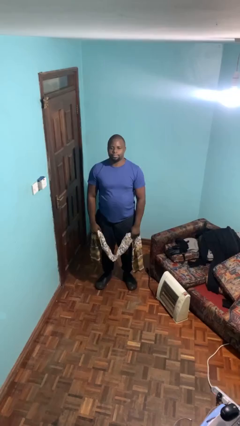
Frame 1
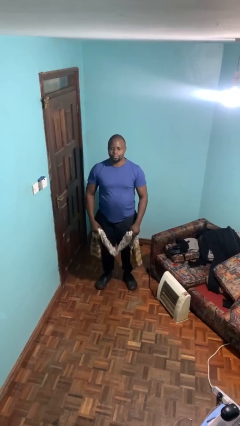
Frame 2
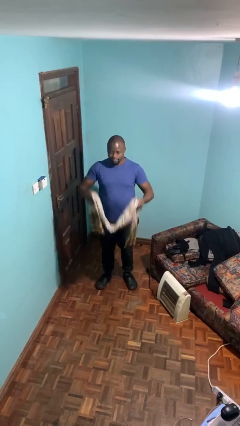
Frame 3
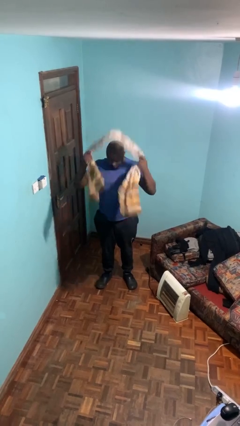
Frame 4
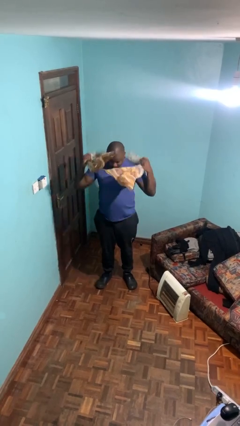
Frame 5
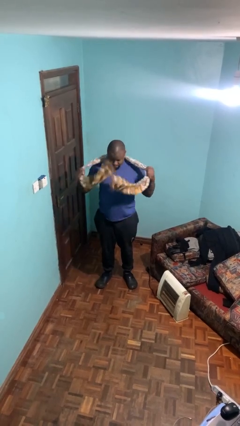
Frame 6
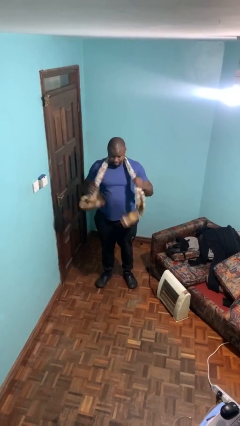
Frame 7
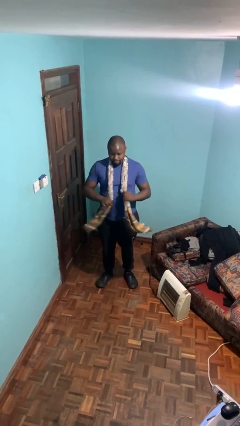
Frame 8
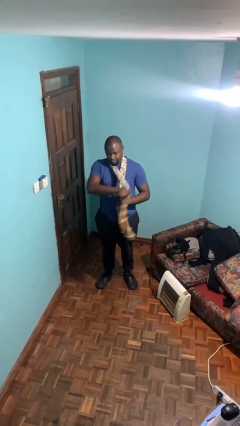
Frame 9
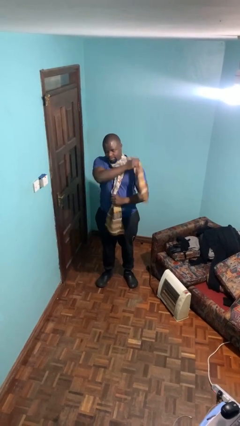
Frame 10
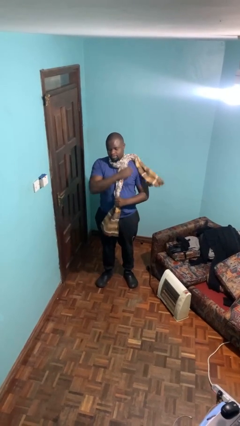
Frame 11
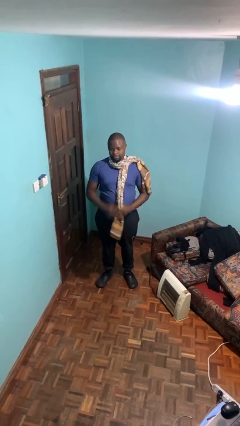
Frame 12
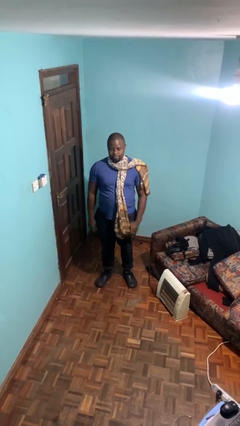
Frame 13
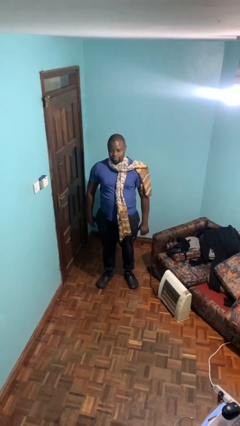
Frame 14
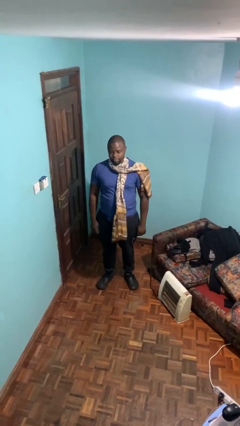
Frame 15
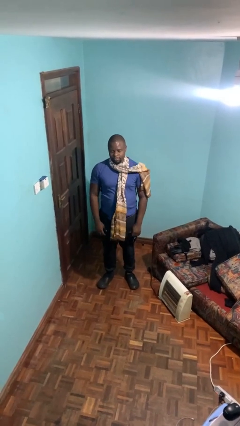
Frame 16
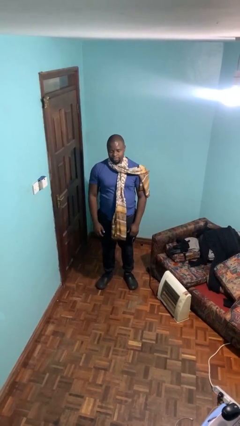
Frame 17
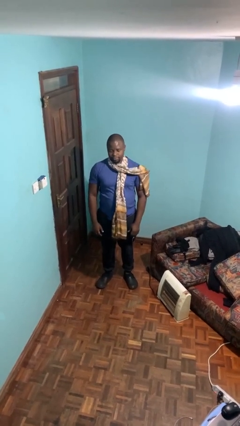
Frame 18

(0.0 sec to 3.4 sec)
person puts on scarf

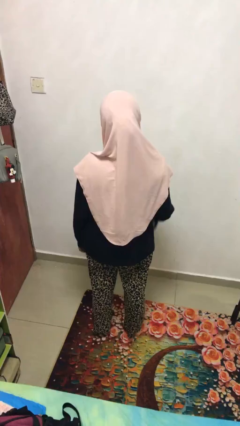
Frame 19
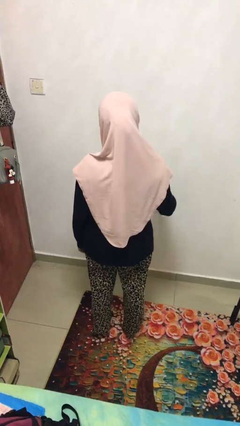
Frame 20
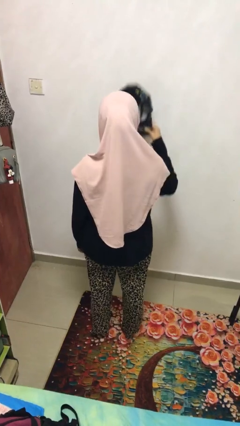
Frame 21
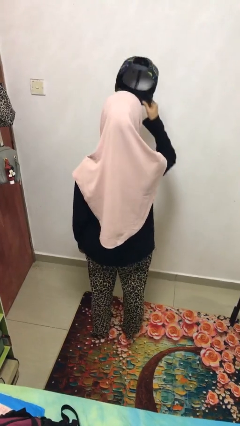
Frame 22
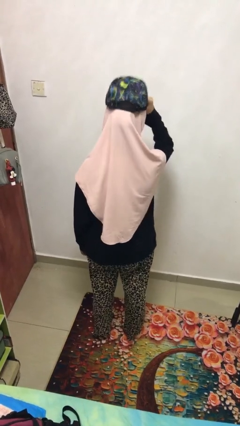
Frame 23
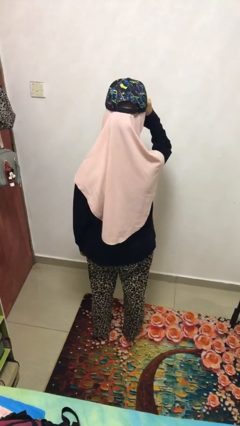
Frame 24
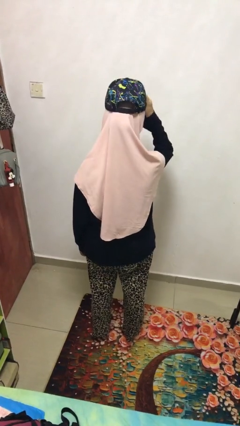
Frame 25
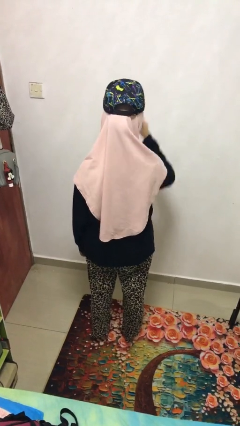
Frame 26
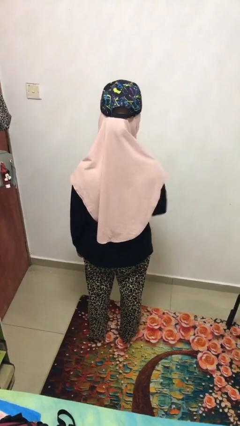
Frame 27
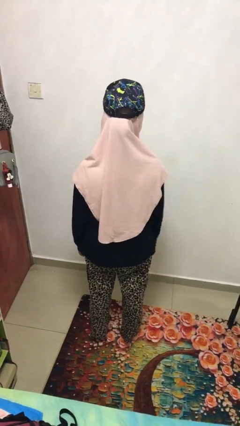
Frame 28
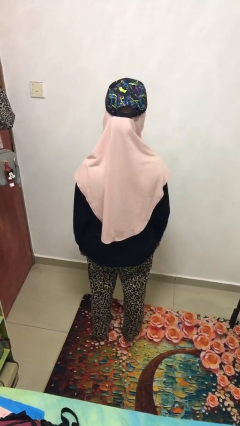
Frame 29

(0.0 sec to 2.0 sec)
person puts on hat

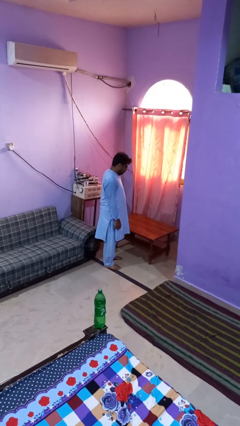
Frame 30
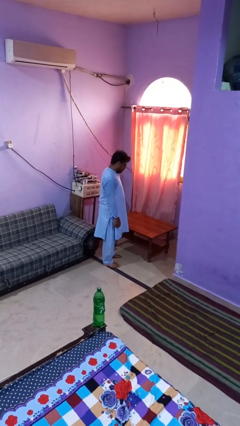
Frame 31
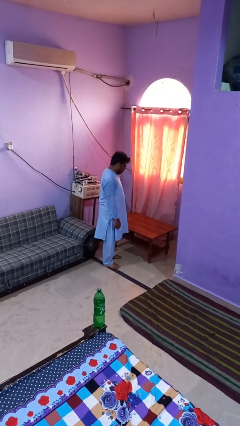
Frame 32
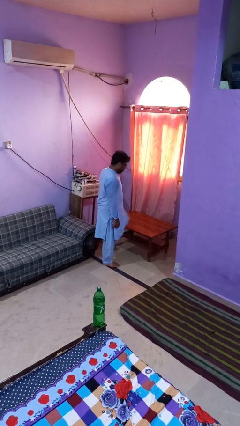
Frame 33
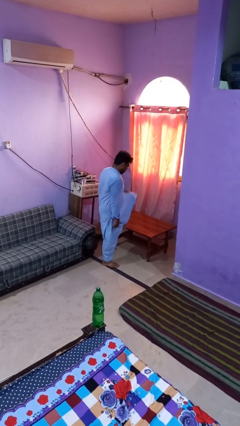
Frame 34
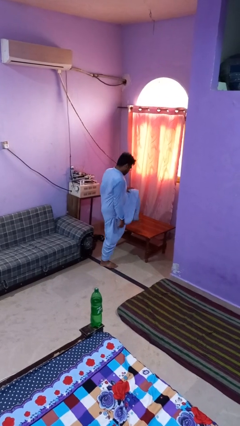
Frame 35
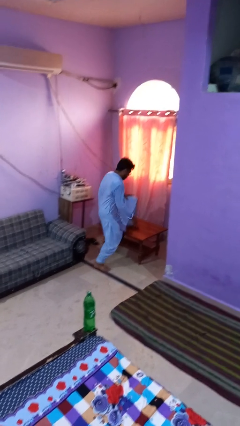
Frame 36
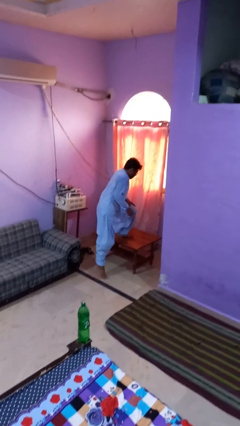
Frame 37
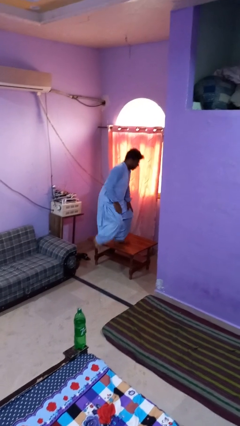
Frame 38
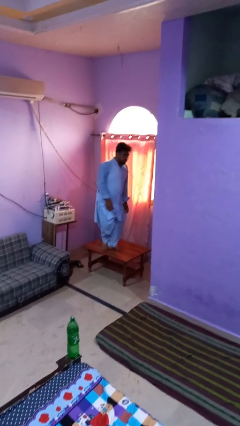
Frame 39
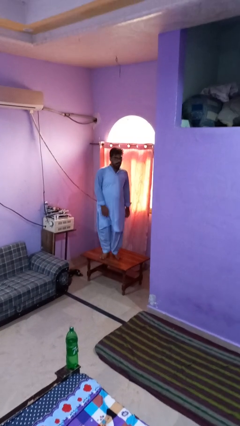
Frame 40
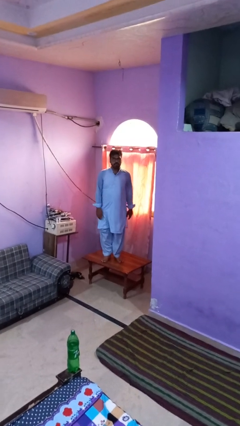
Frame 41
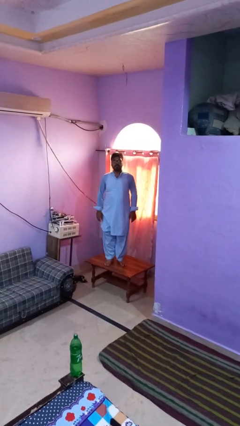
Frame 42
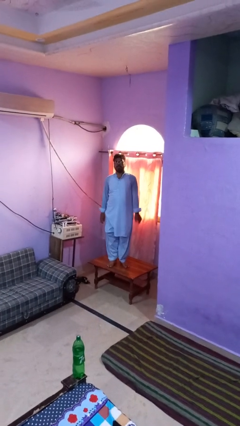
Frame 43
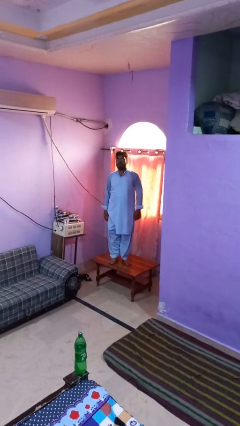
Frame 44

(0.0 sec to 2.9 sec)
person climbs on table

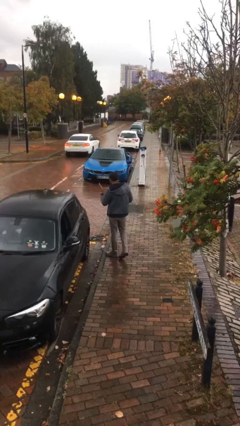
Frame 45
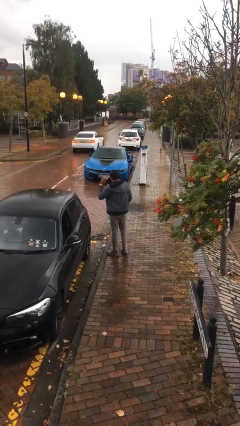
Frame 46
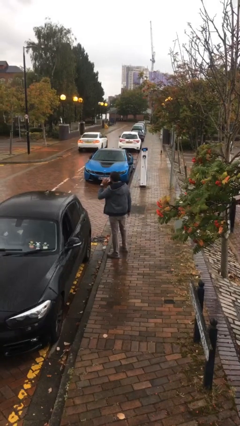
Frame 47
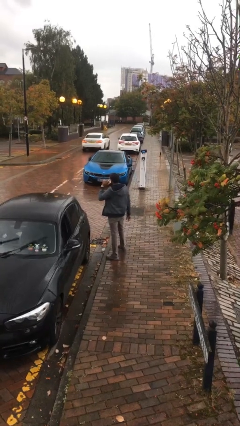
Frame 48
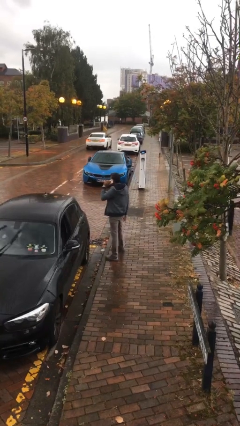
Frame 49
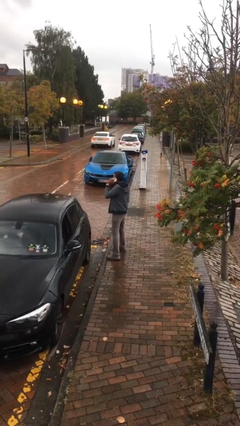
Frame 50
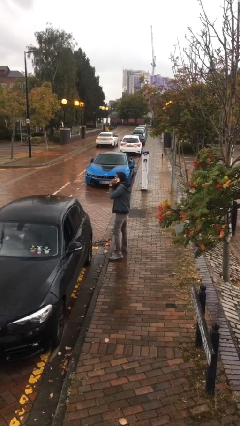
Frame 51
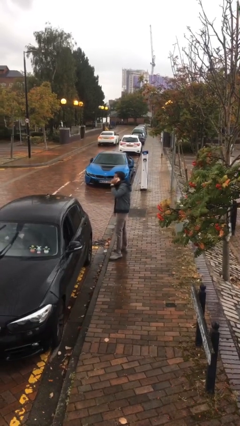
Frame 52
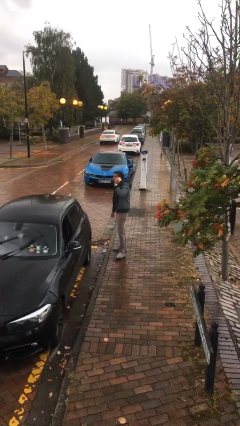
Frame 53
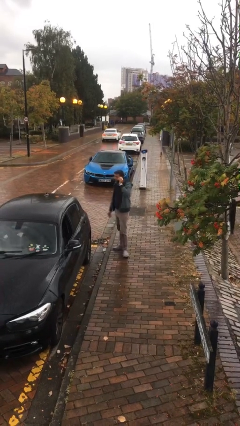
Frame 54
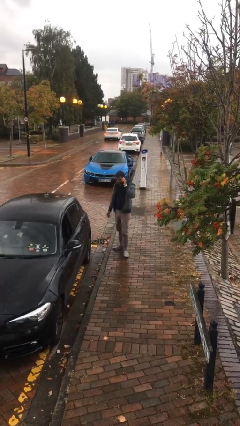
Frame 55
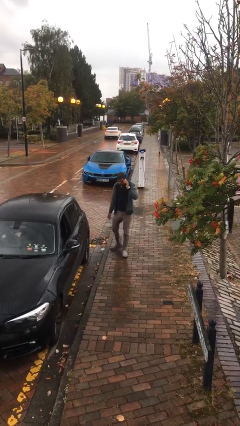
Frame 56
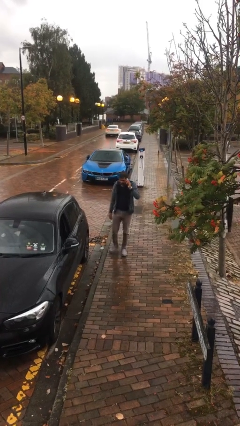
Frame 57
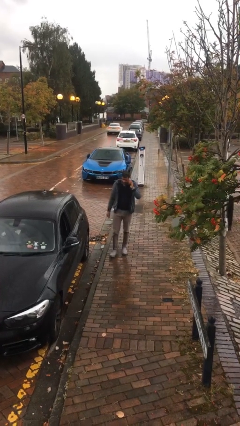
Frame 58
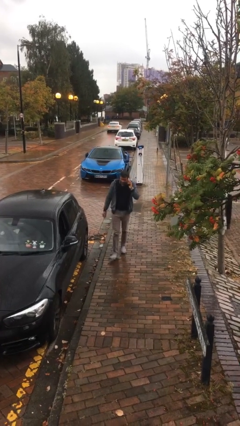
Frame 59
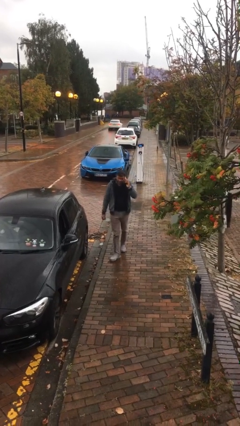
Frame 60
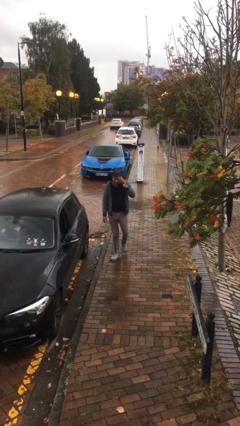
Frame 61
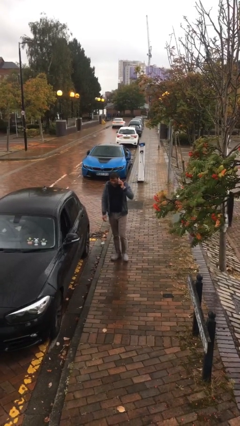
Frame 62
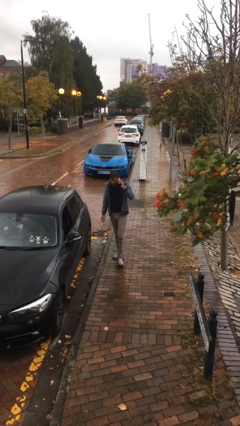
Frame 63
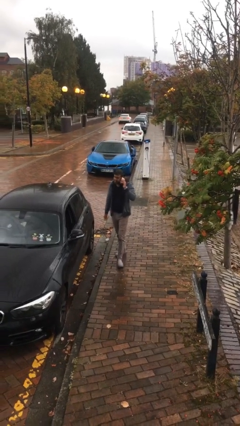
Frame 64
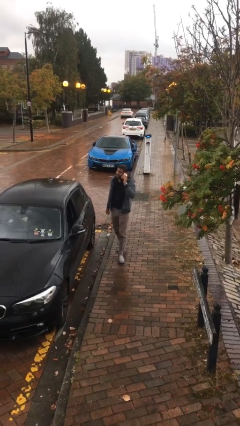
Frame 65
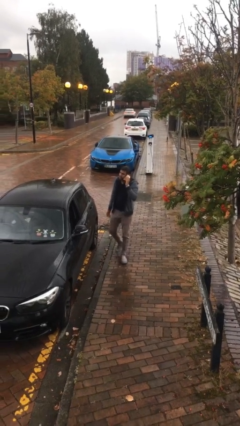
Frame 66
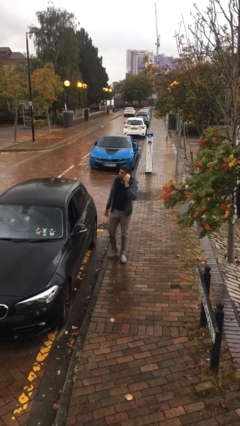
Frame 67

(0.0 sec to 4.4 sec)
person talks on phone

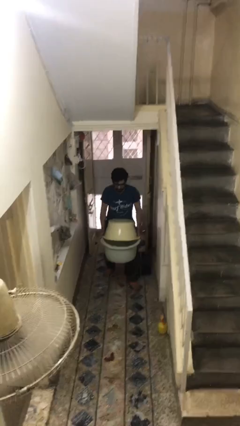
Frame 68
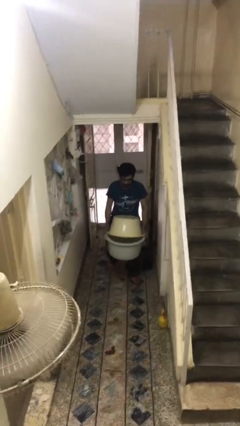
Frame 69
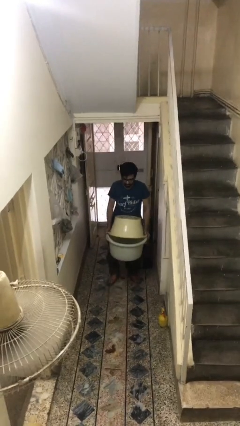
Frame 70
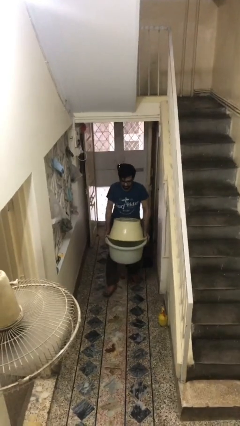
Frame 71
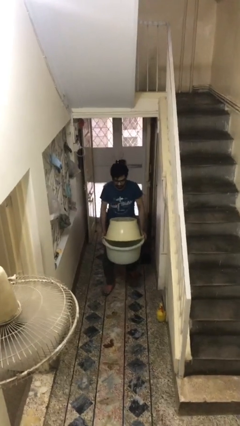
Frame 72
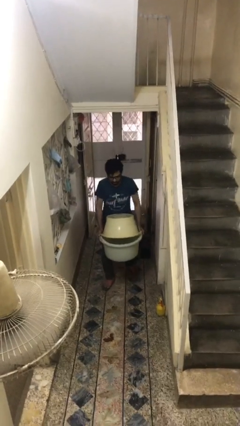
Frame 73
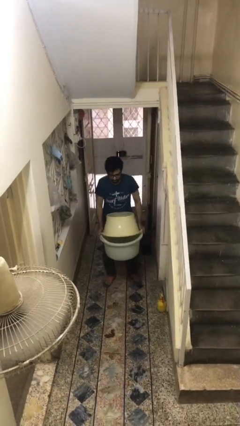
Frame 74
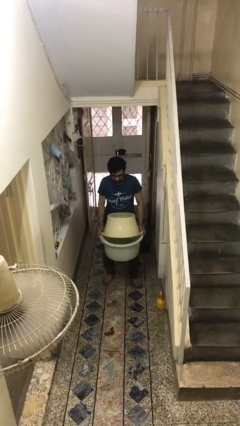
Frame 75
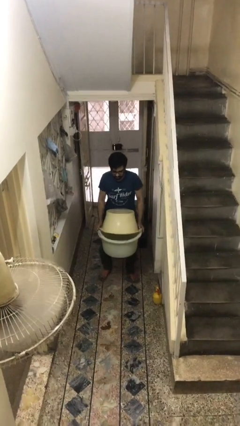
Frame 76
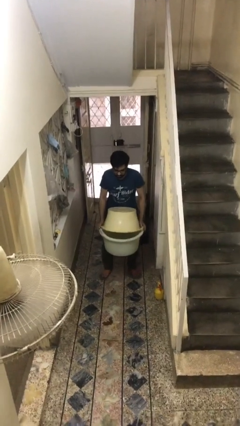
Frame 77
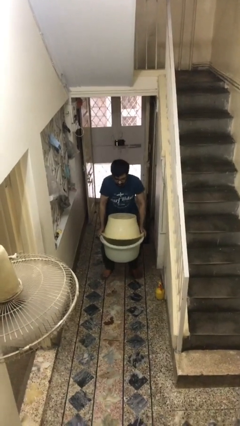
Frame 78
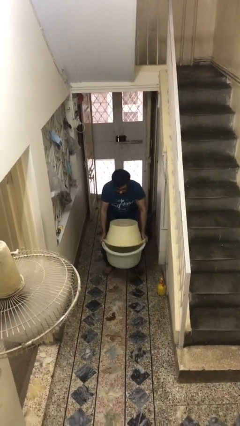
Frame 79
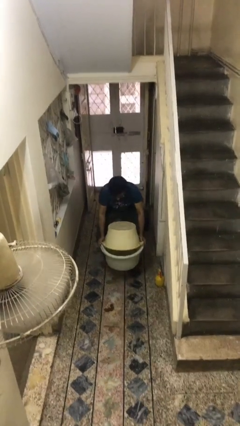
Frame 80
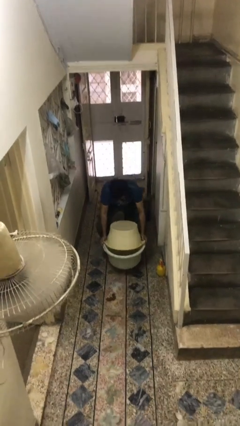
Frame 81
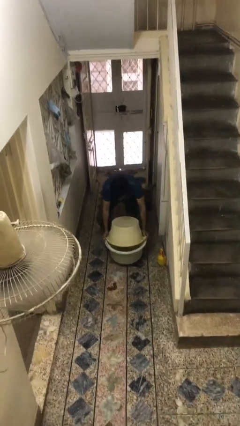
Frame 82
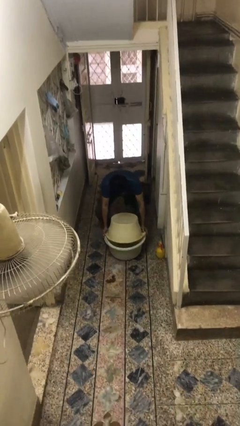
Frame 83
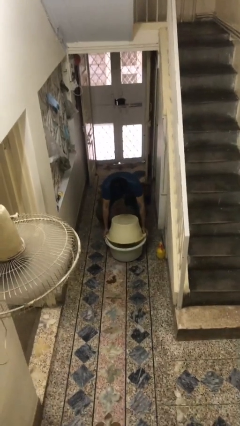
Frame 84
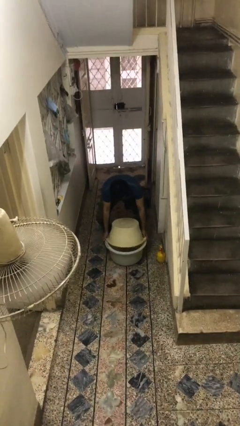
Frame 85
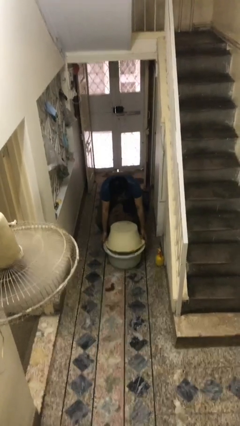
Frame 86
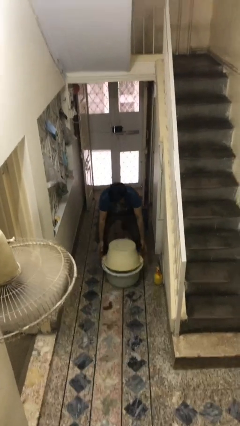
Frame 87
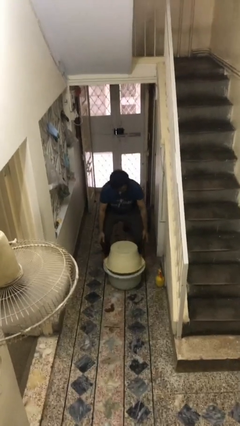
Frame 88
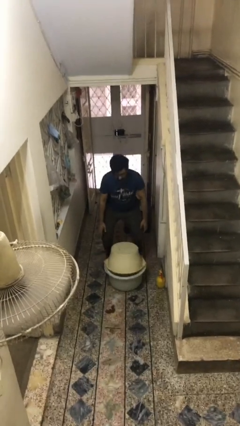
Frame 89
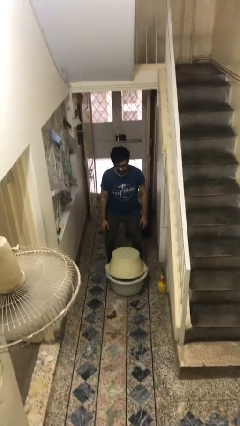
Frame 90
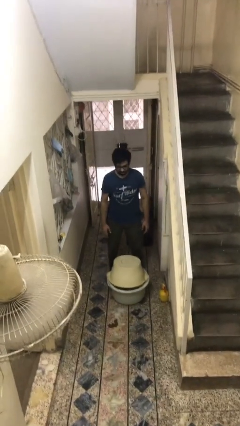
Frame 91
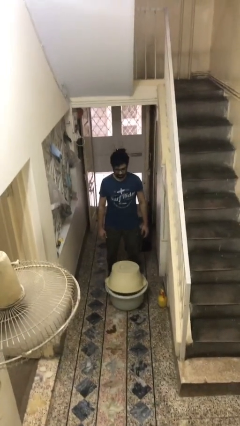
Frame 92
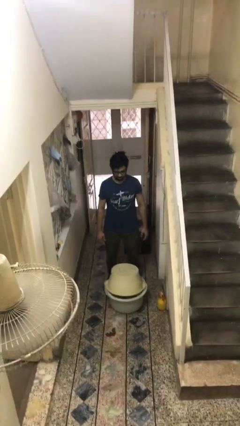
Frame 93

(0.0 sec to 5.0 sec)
person puts down object on floor
